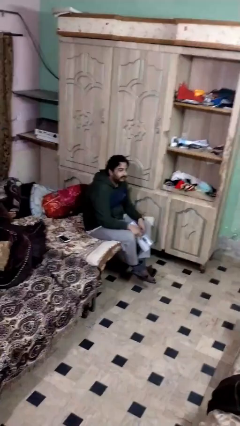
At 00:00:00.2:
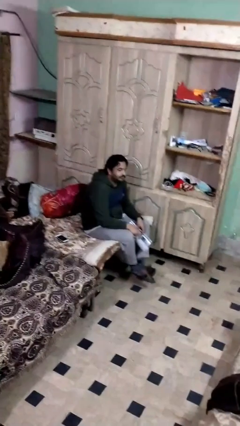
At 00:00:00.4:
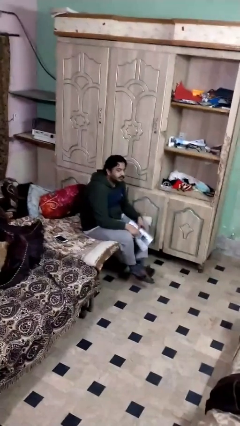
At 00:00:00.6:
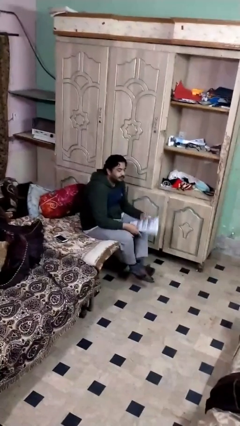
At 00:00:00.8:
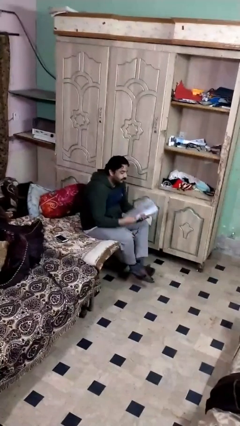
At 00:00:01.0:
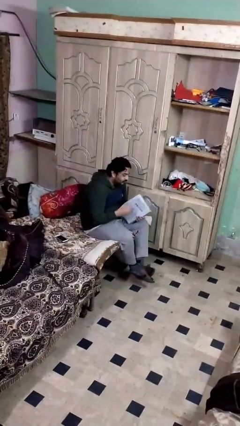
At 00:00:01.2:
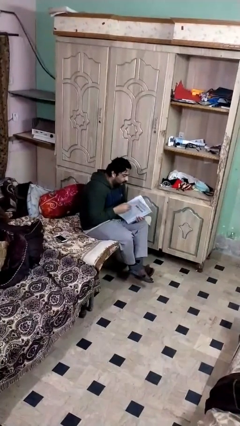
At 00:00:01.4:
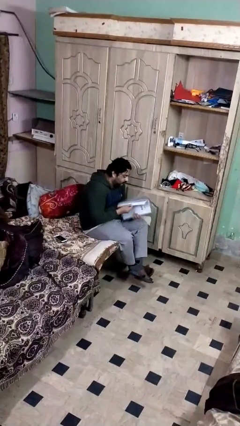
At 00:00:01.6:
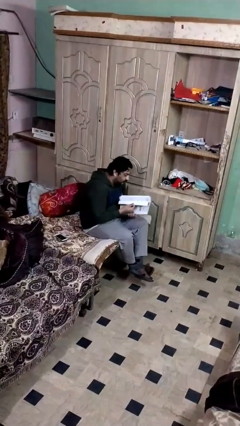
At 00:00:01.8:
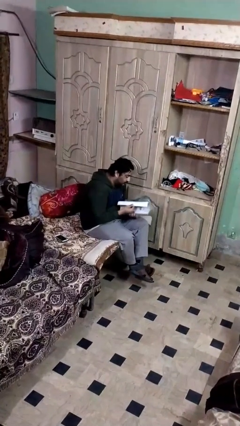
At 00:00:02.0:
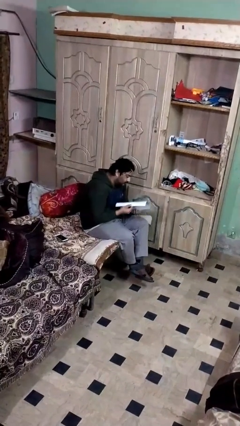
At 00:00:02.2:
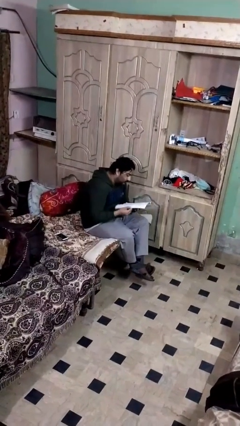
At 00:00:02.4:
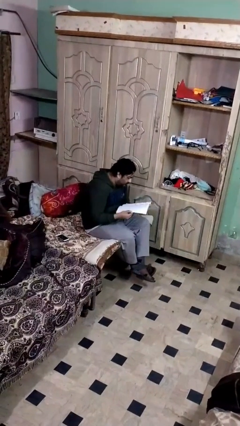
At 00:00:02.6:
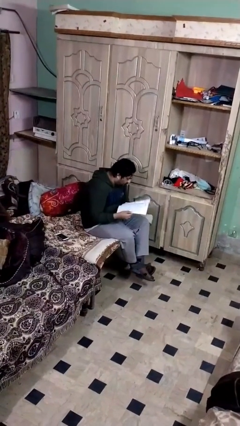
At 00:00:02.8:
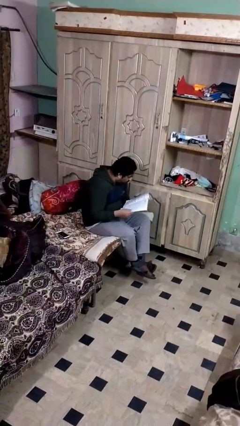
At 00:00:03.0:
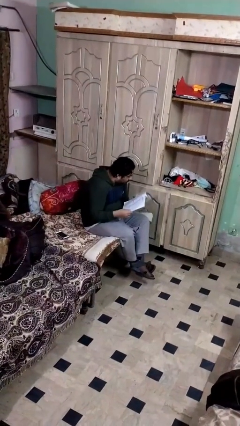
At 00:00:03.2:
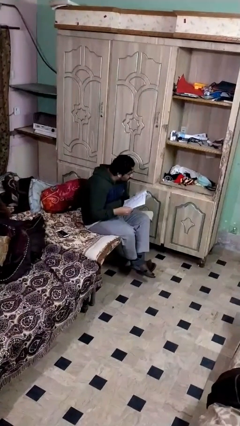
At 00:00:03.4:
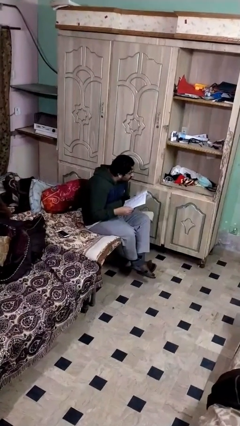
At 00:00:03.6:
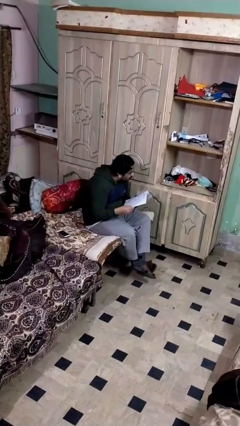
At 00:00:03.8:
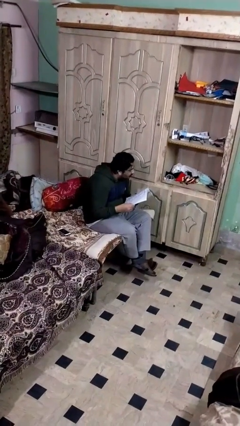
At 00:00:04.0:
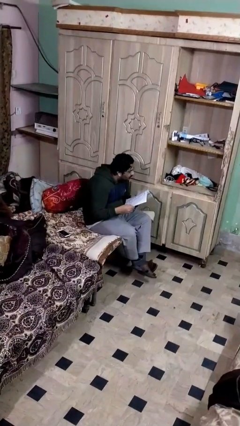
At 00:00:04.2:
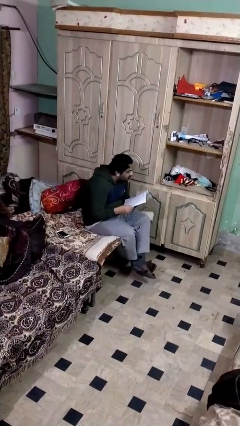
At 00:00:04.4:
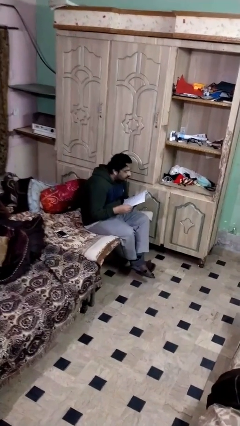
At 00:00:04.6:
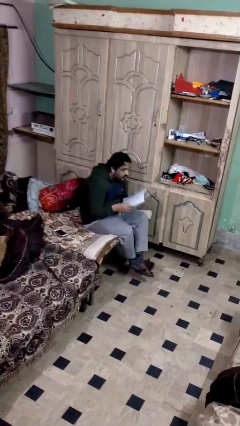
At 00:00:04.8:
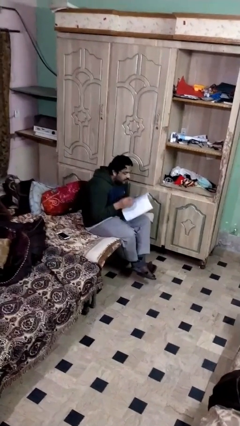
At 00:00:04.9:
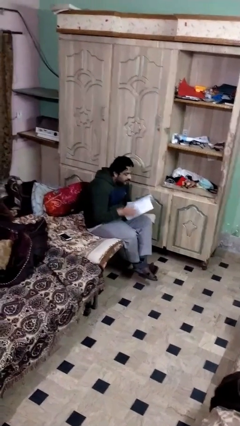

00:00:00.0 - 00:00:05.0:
person reads document

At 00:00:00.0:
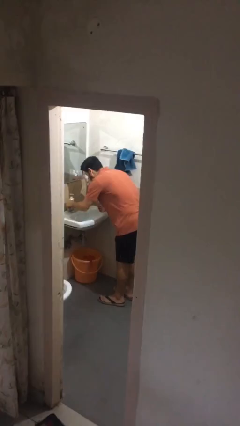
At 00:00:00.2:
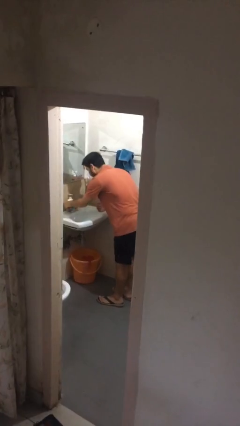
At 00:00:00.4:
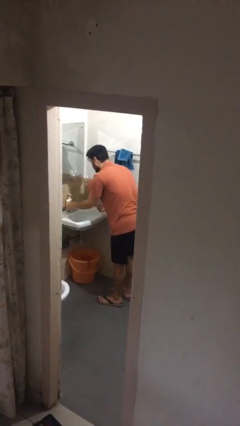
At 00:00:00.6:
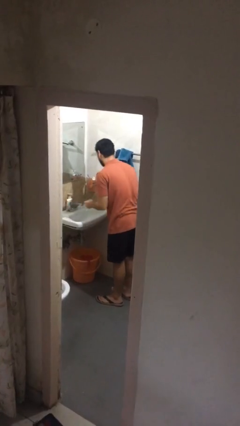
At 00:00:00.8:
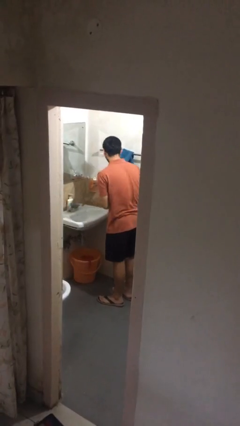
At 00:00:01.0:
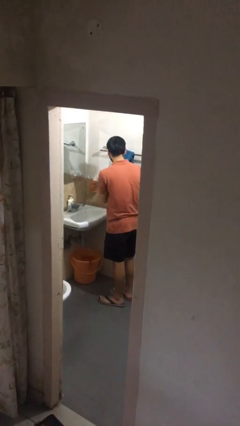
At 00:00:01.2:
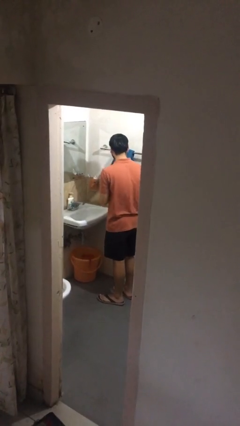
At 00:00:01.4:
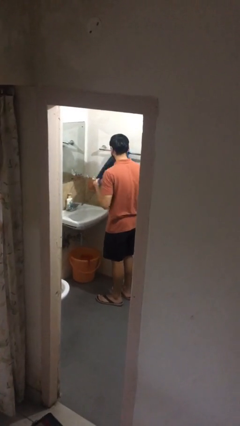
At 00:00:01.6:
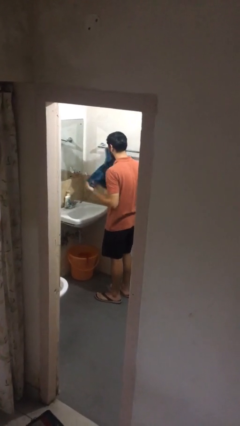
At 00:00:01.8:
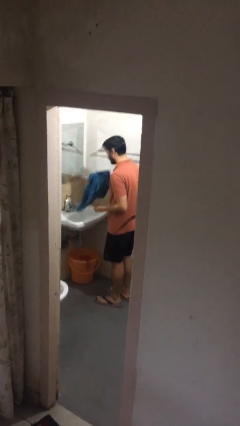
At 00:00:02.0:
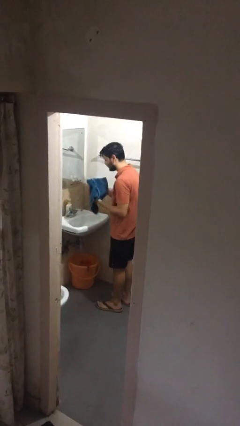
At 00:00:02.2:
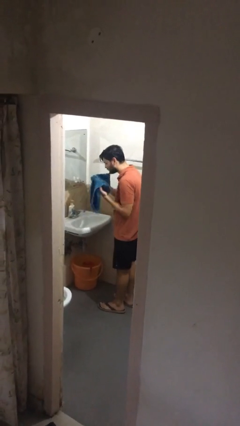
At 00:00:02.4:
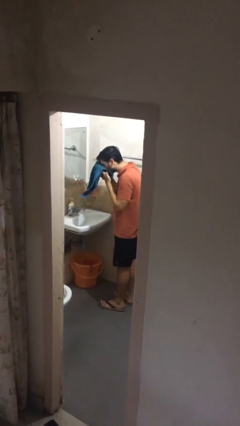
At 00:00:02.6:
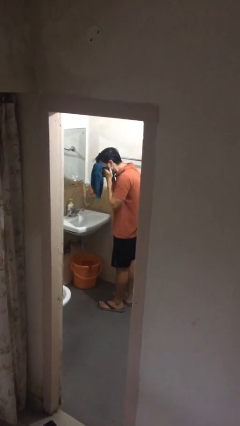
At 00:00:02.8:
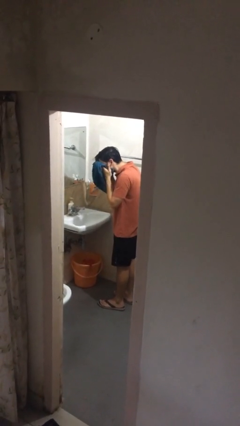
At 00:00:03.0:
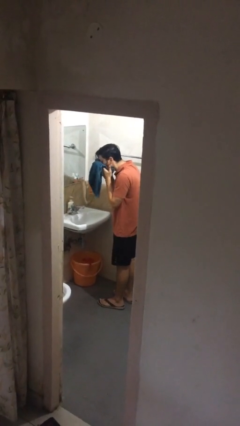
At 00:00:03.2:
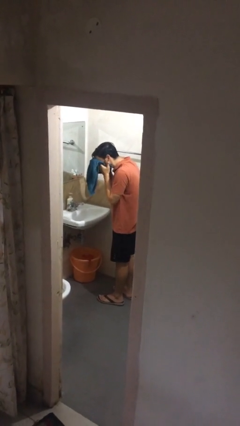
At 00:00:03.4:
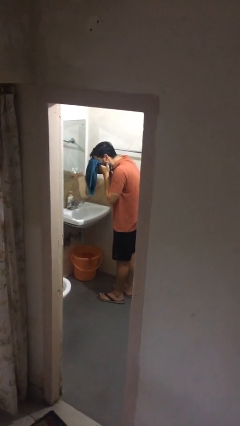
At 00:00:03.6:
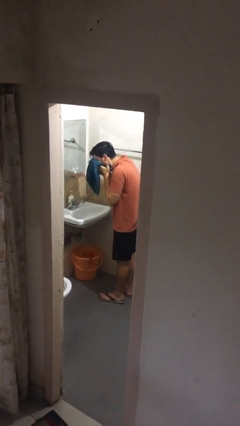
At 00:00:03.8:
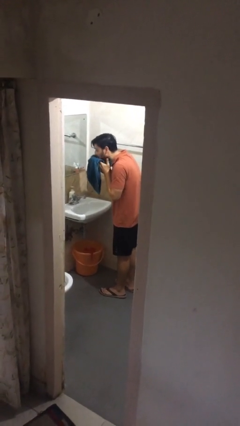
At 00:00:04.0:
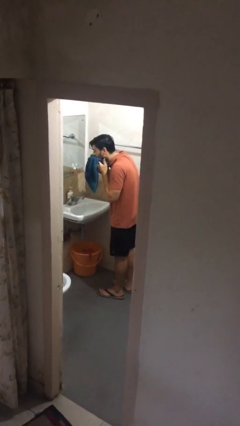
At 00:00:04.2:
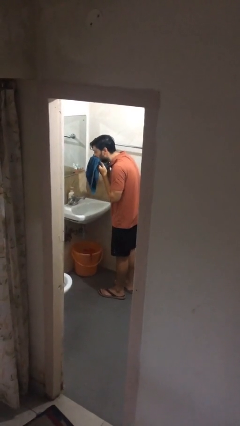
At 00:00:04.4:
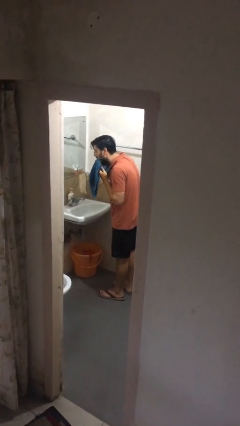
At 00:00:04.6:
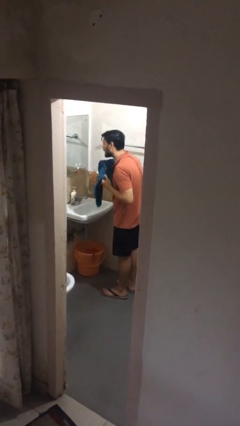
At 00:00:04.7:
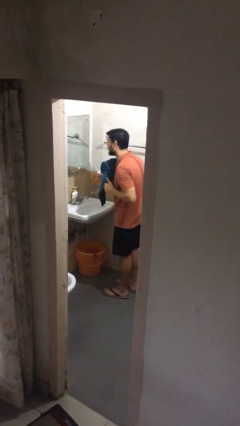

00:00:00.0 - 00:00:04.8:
person dries face with towel

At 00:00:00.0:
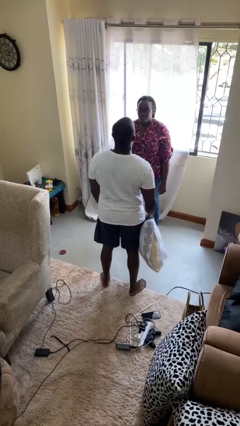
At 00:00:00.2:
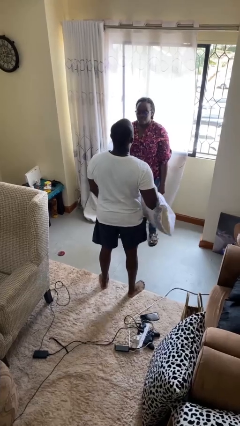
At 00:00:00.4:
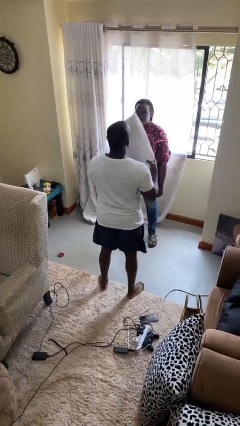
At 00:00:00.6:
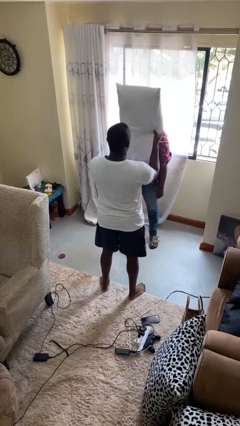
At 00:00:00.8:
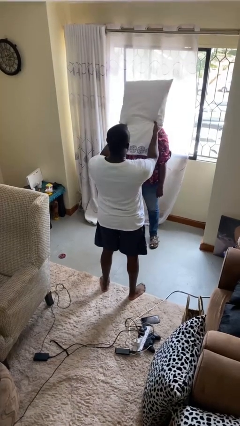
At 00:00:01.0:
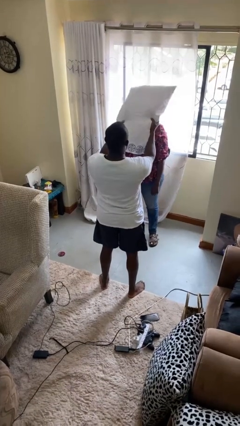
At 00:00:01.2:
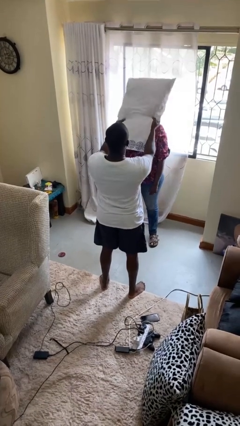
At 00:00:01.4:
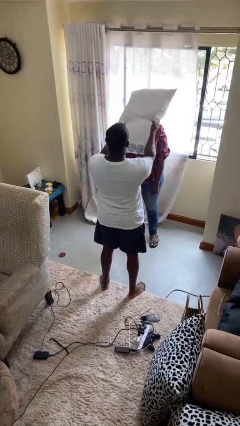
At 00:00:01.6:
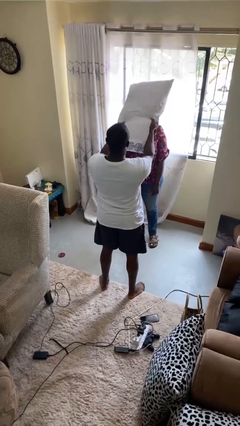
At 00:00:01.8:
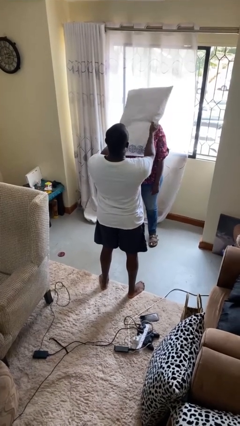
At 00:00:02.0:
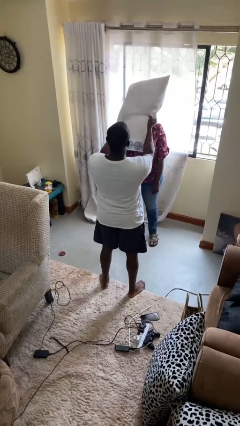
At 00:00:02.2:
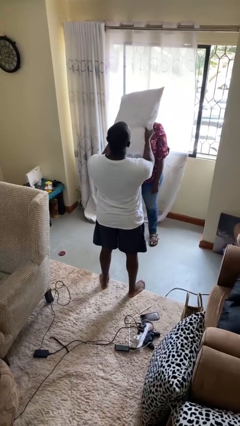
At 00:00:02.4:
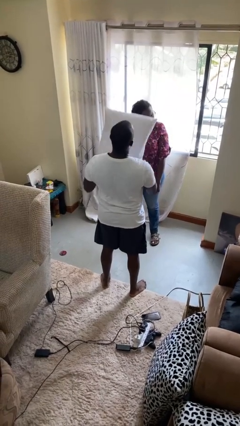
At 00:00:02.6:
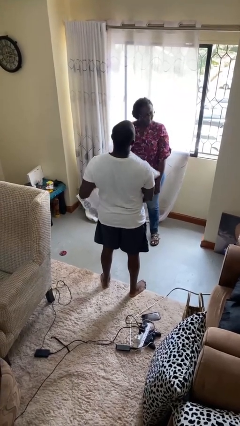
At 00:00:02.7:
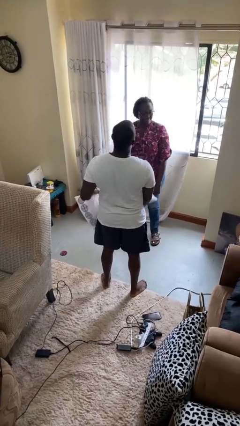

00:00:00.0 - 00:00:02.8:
person hits person with pillow

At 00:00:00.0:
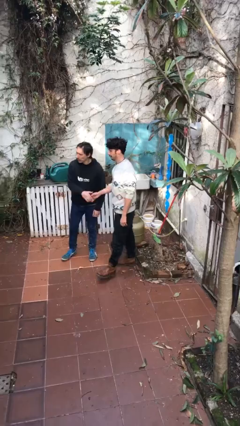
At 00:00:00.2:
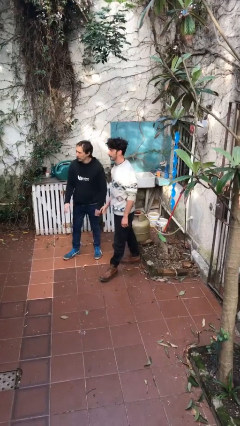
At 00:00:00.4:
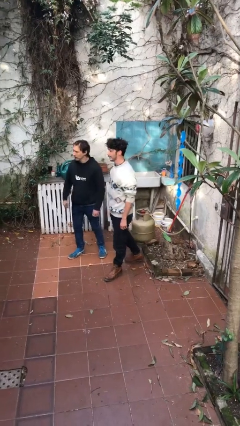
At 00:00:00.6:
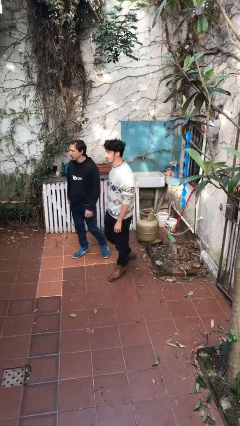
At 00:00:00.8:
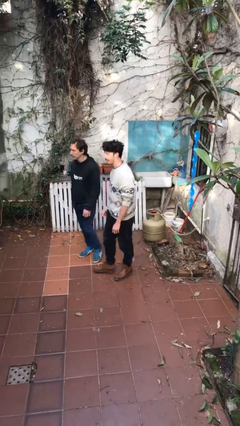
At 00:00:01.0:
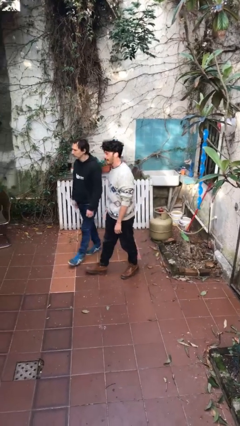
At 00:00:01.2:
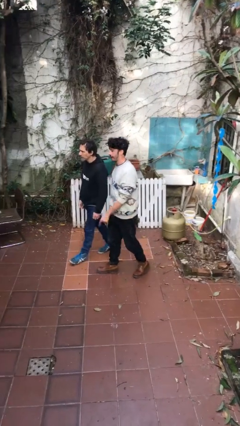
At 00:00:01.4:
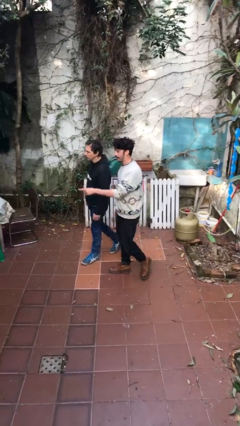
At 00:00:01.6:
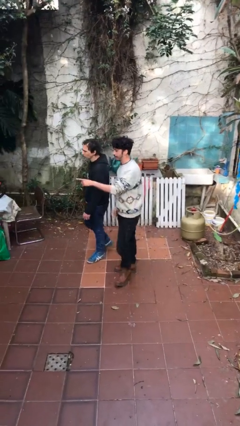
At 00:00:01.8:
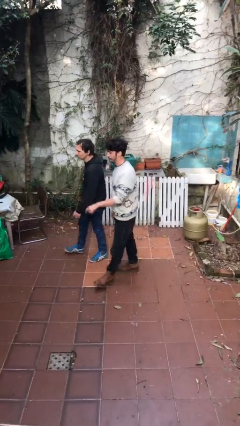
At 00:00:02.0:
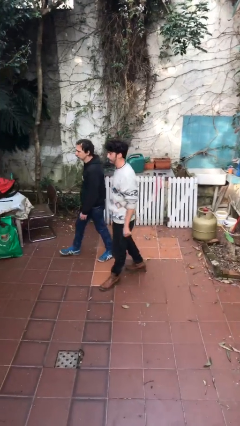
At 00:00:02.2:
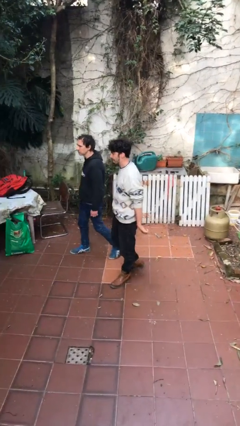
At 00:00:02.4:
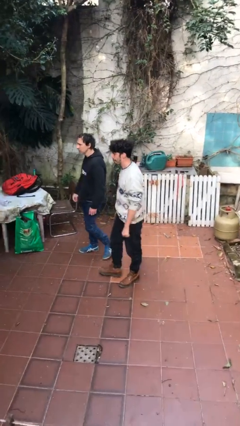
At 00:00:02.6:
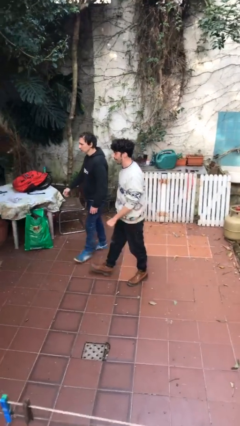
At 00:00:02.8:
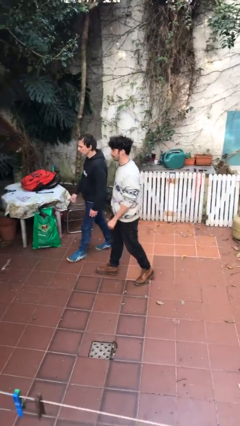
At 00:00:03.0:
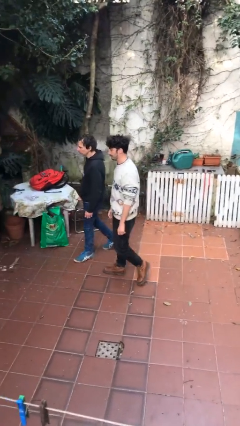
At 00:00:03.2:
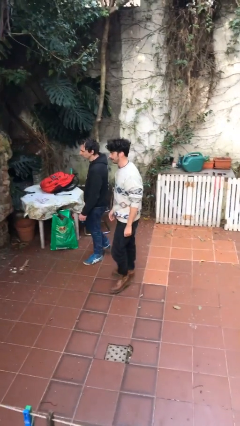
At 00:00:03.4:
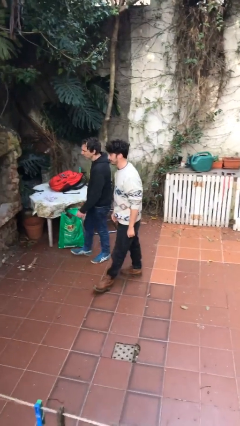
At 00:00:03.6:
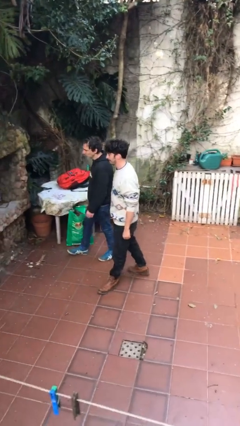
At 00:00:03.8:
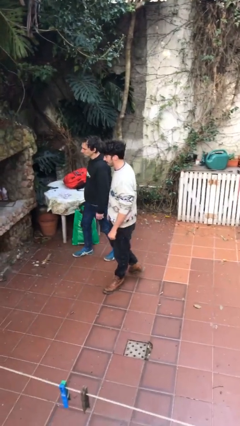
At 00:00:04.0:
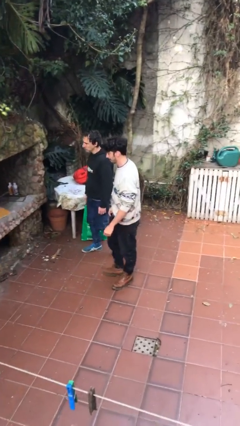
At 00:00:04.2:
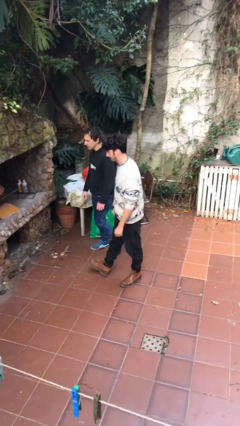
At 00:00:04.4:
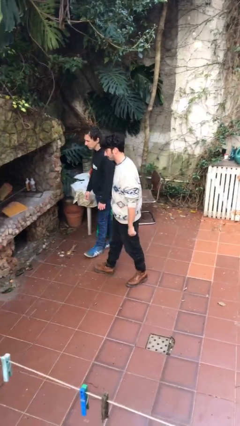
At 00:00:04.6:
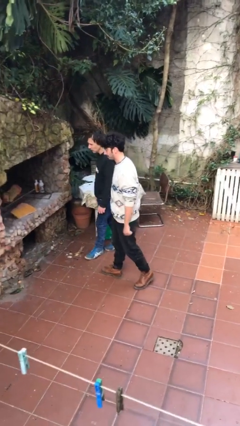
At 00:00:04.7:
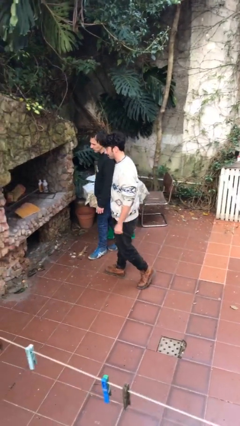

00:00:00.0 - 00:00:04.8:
person talks to person
